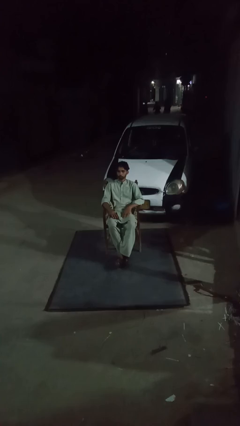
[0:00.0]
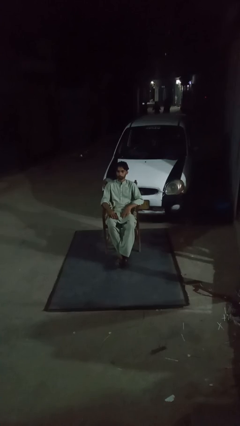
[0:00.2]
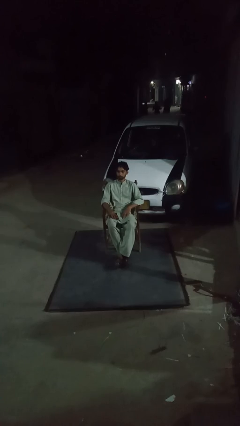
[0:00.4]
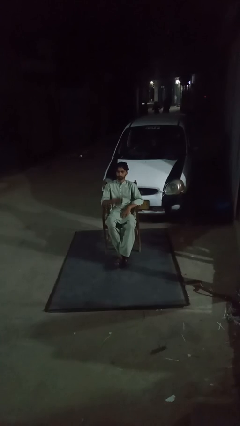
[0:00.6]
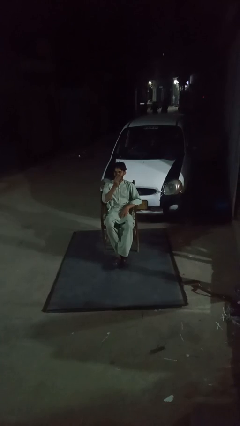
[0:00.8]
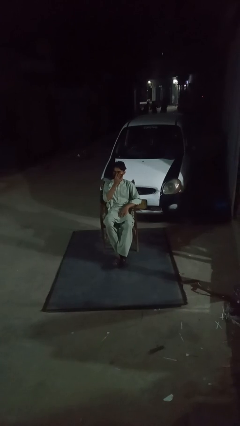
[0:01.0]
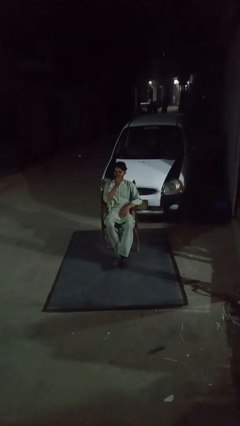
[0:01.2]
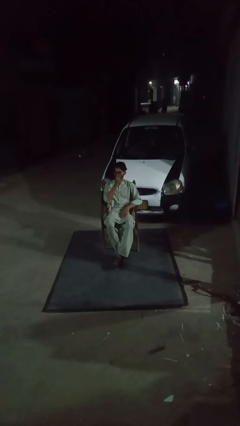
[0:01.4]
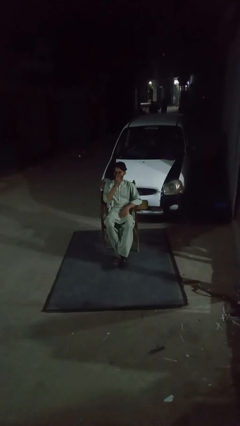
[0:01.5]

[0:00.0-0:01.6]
person wipes mouth with napkin

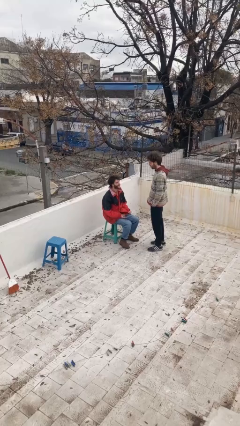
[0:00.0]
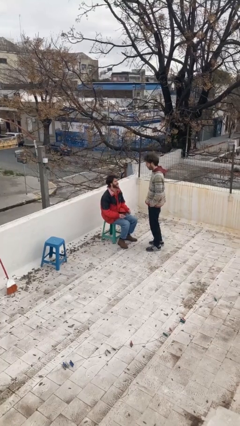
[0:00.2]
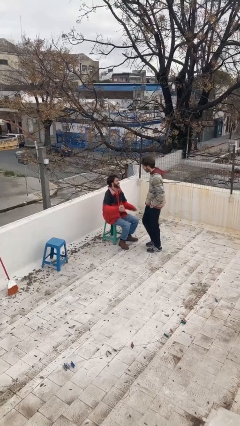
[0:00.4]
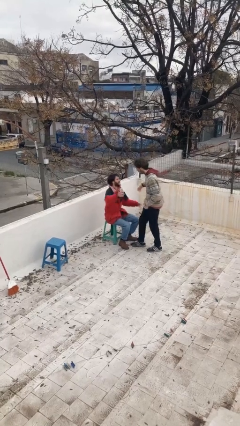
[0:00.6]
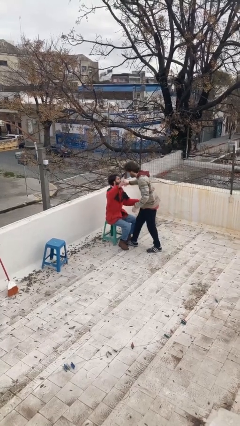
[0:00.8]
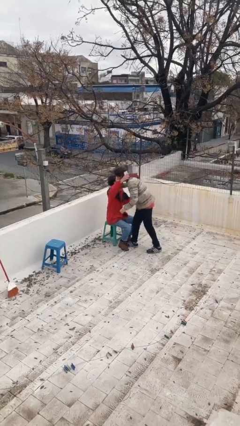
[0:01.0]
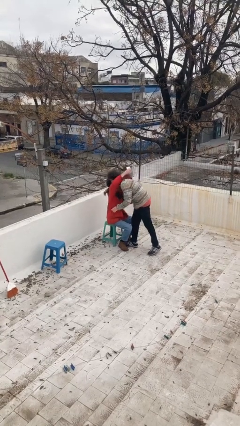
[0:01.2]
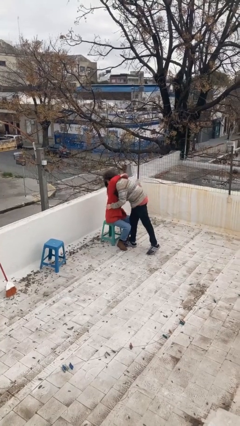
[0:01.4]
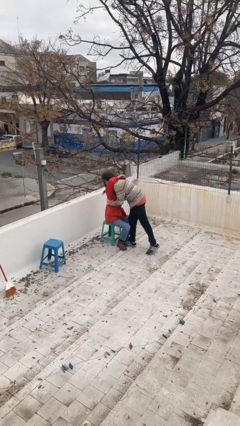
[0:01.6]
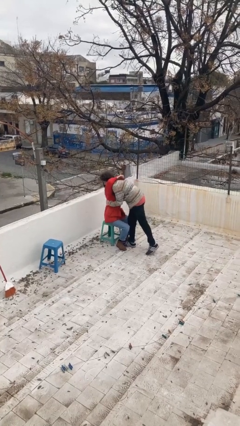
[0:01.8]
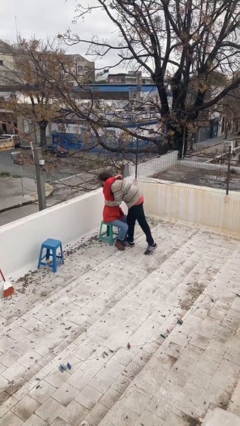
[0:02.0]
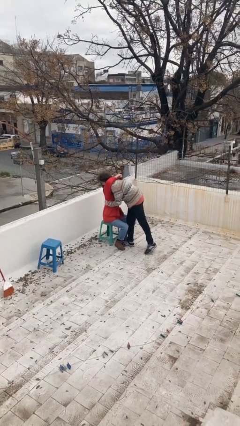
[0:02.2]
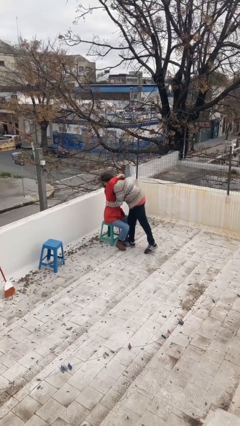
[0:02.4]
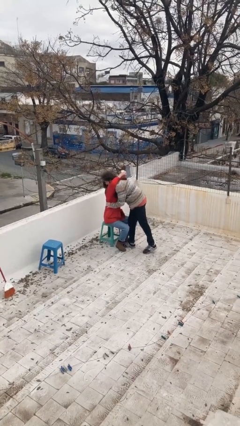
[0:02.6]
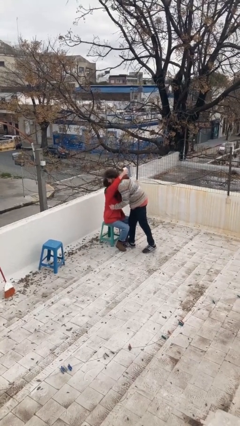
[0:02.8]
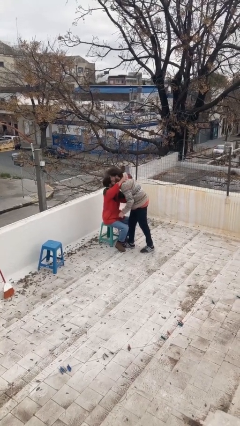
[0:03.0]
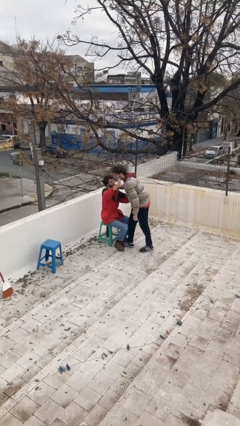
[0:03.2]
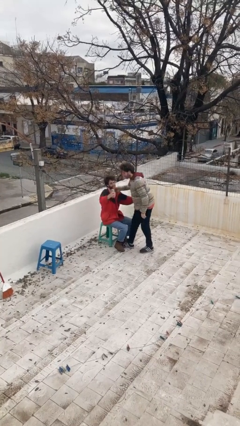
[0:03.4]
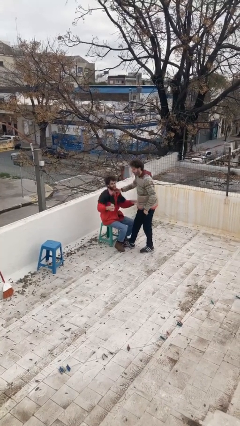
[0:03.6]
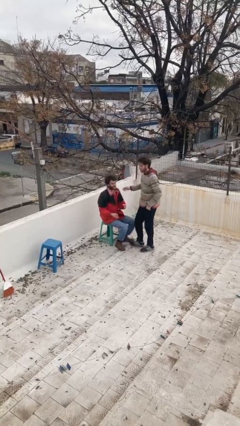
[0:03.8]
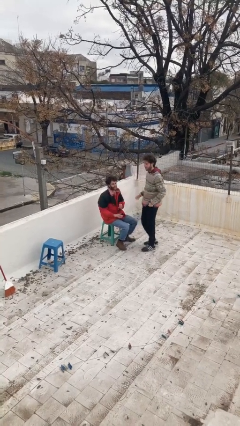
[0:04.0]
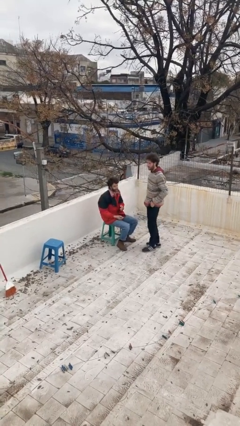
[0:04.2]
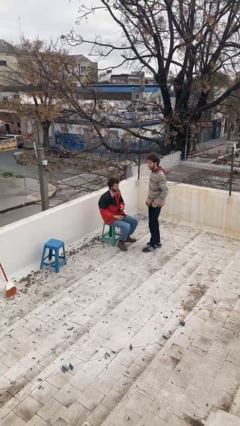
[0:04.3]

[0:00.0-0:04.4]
person embraces person

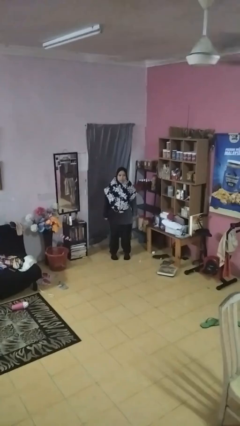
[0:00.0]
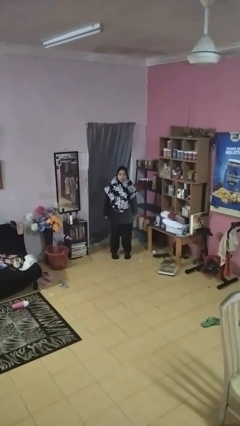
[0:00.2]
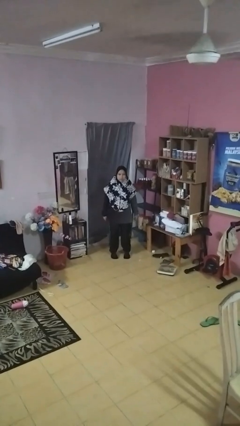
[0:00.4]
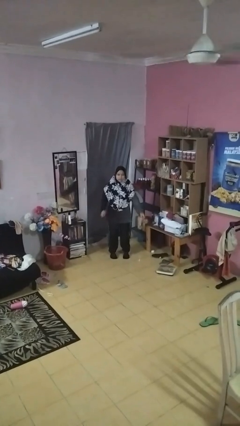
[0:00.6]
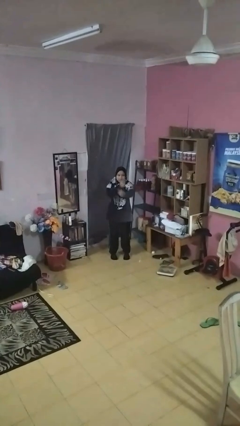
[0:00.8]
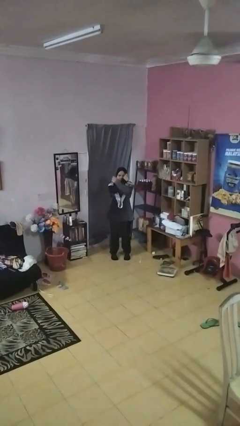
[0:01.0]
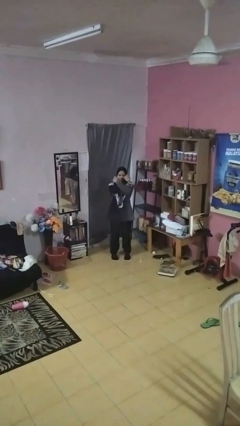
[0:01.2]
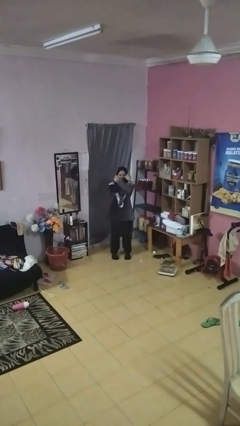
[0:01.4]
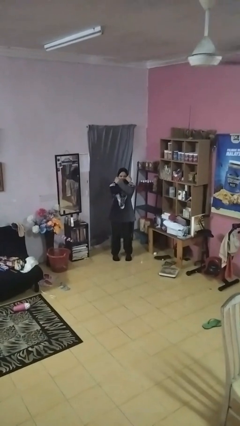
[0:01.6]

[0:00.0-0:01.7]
person crosses arms

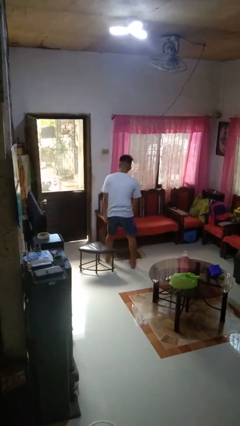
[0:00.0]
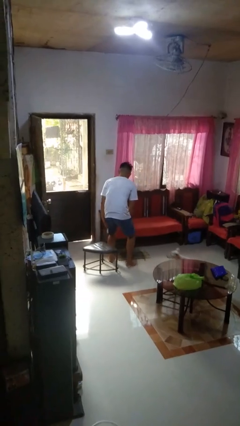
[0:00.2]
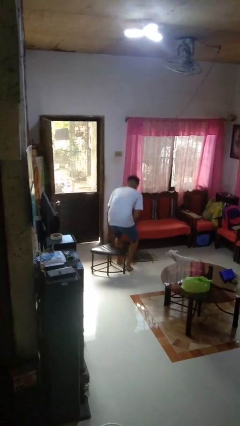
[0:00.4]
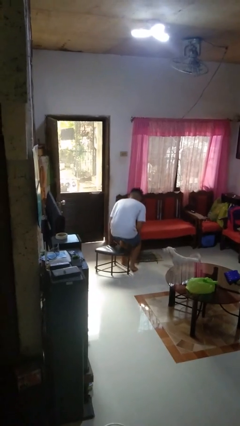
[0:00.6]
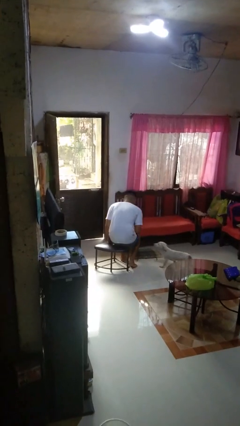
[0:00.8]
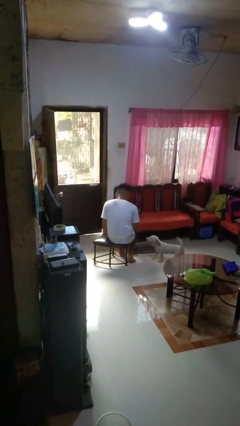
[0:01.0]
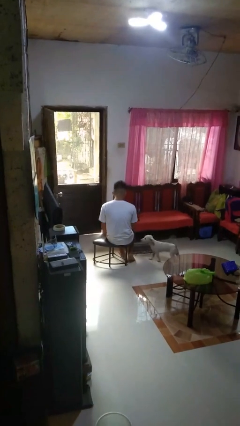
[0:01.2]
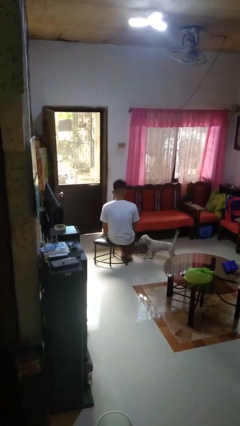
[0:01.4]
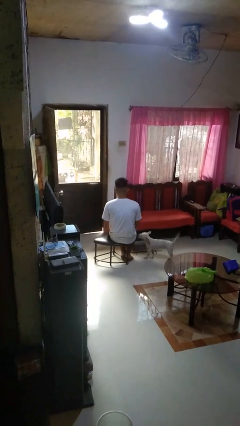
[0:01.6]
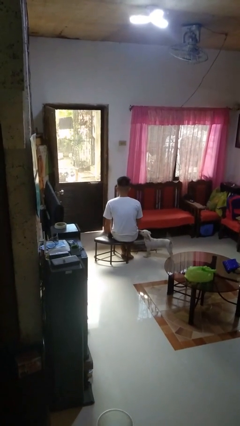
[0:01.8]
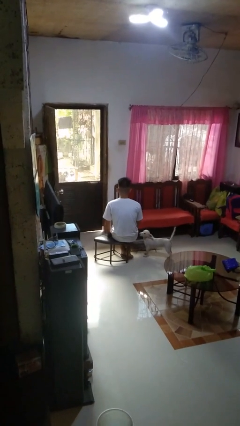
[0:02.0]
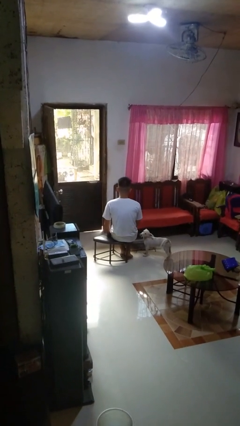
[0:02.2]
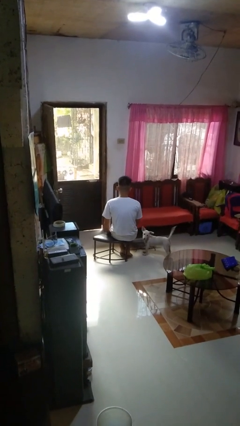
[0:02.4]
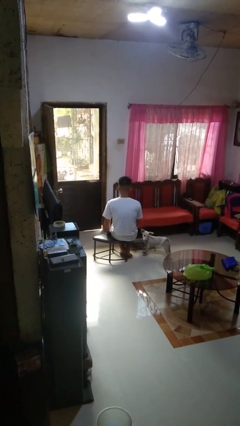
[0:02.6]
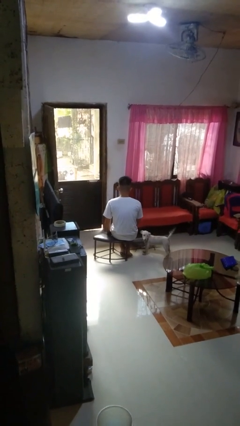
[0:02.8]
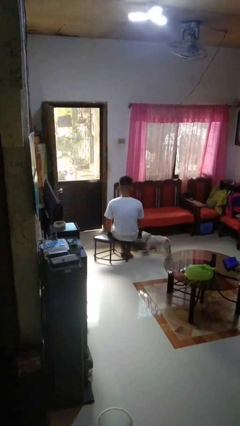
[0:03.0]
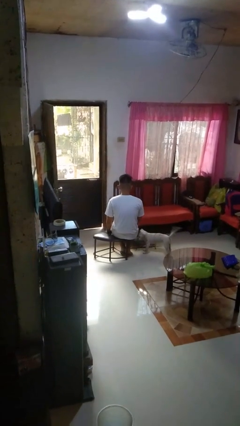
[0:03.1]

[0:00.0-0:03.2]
person sits down

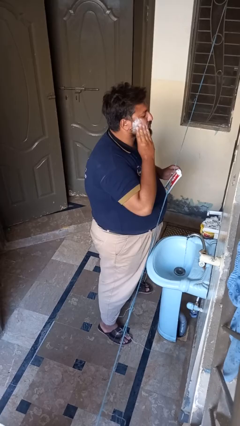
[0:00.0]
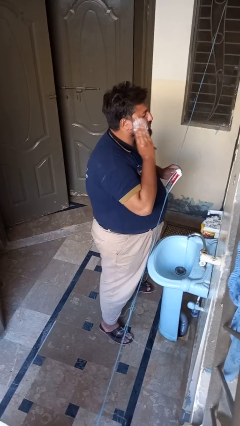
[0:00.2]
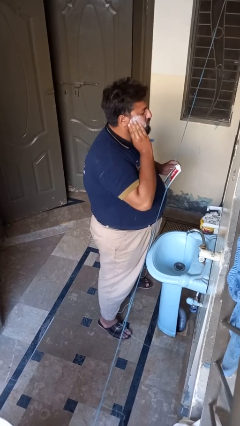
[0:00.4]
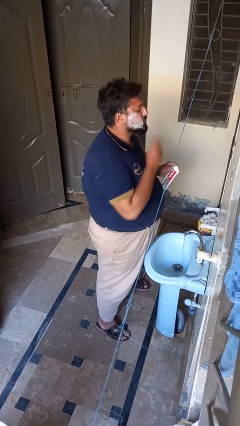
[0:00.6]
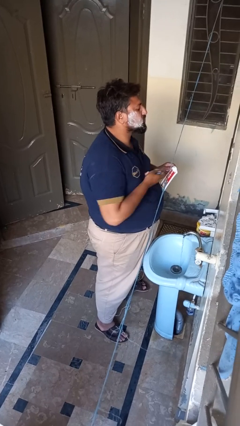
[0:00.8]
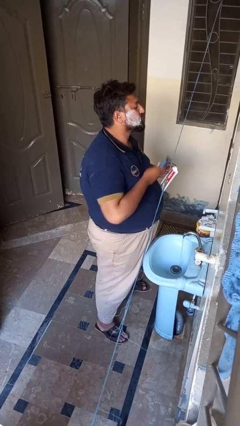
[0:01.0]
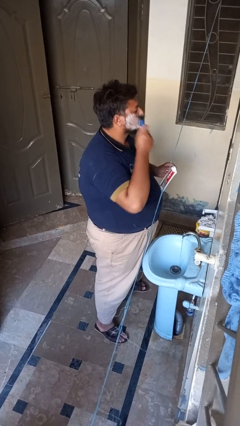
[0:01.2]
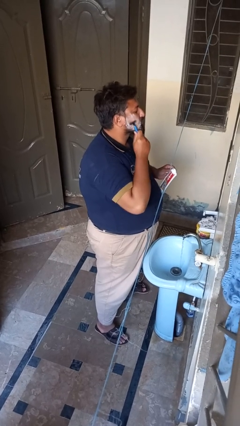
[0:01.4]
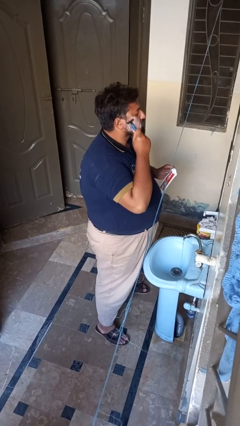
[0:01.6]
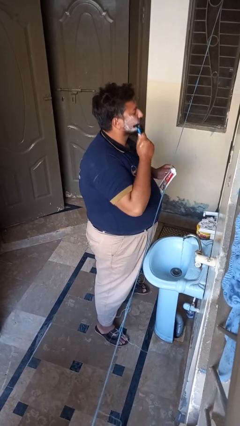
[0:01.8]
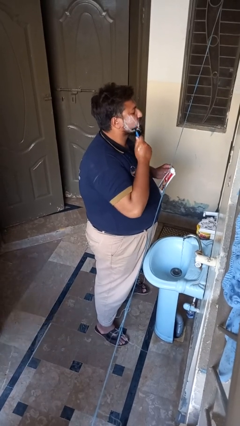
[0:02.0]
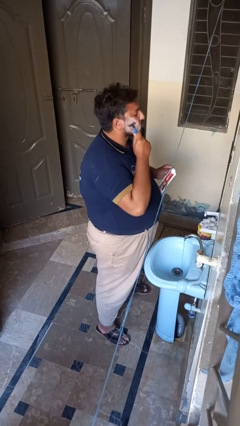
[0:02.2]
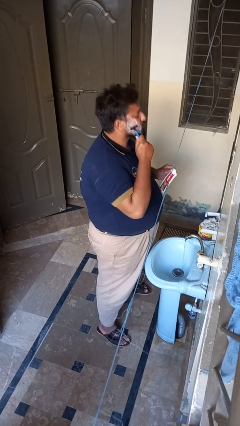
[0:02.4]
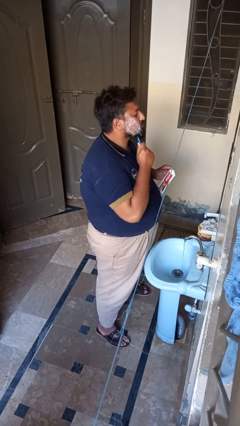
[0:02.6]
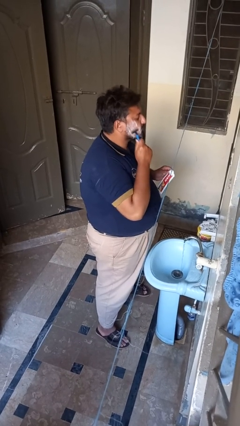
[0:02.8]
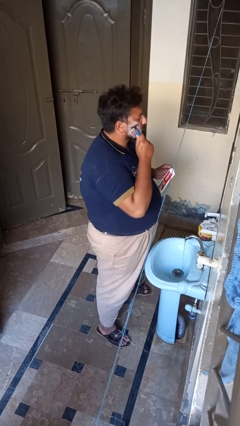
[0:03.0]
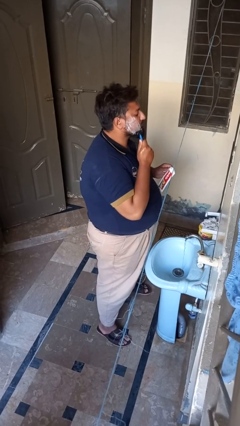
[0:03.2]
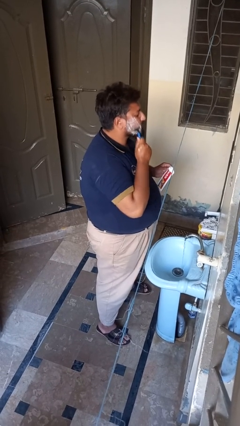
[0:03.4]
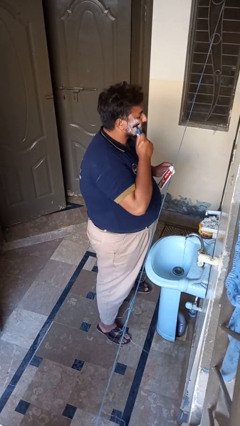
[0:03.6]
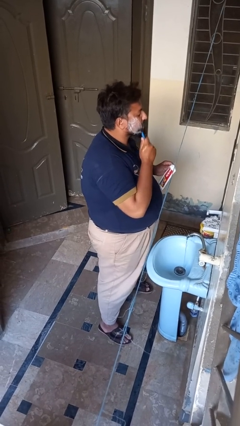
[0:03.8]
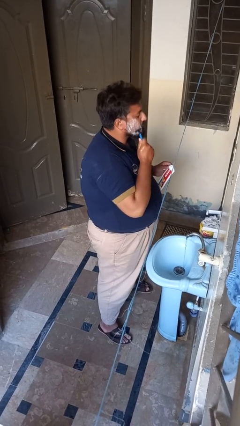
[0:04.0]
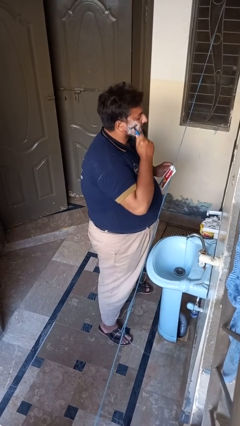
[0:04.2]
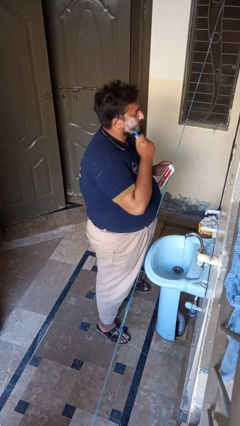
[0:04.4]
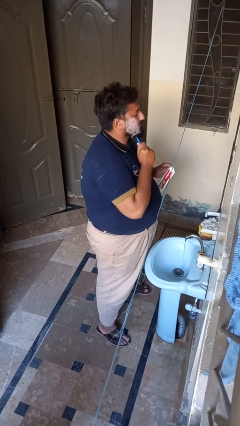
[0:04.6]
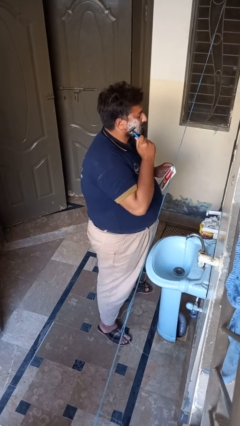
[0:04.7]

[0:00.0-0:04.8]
person shaves face

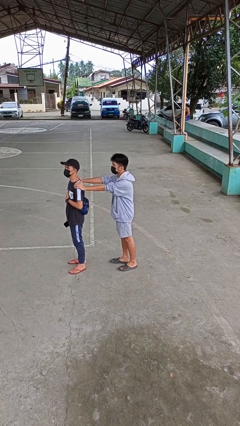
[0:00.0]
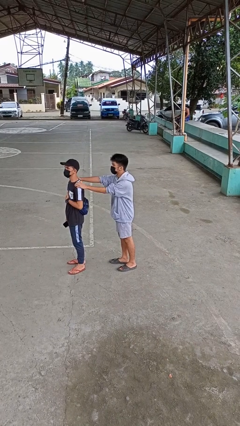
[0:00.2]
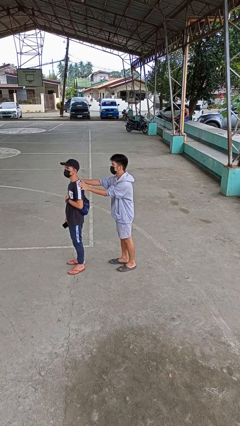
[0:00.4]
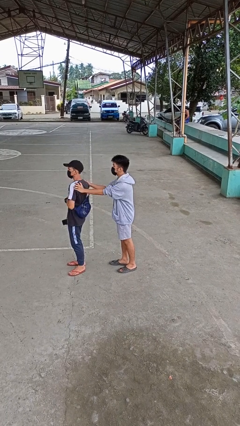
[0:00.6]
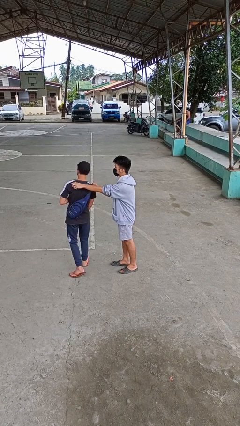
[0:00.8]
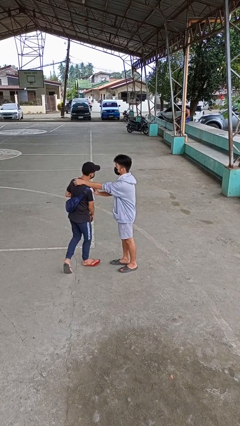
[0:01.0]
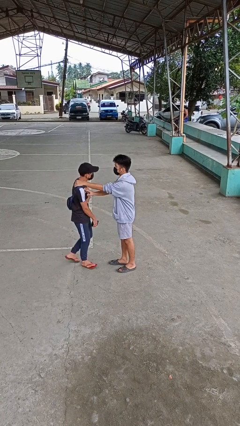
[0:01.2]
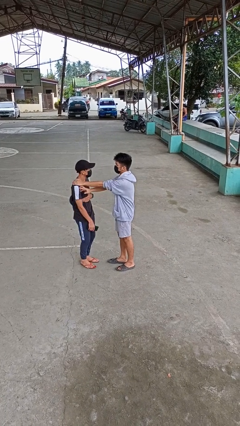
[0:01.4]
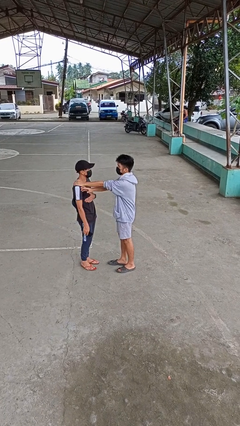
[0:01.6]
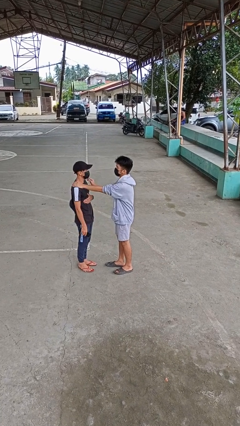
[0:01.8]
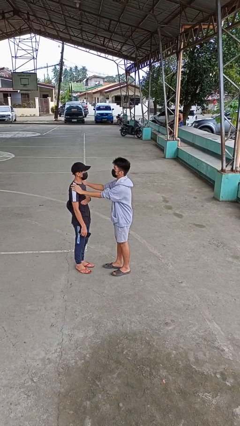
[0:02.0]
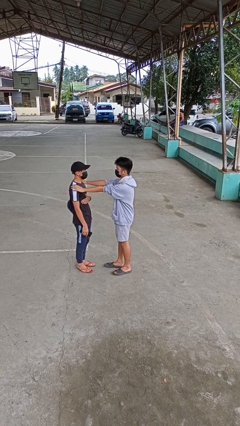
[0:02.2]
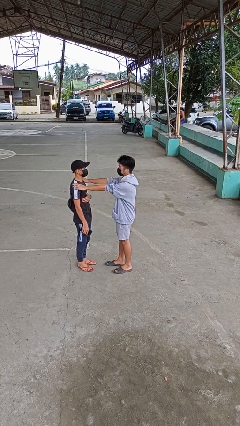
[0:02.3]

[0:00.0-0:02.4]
person spins person around
